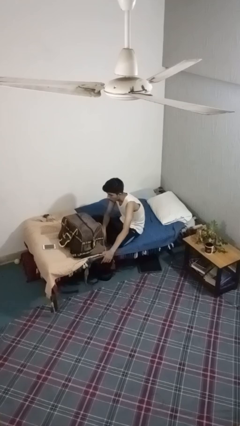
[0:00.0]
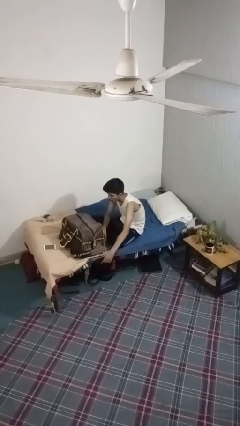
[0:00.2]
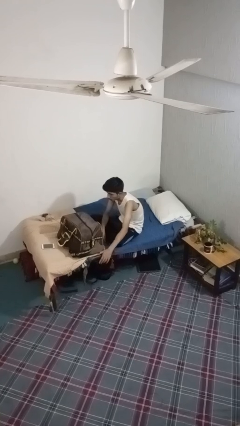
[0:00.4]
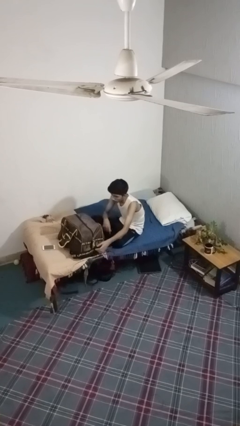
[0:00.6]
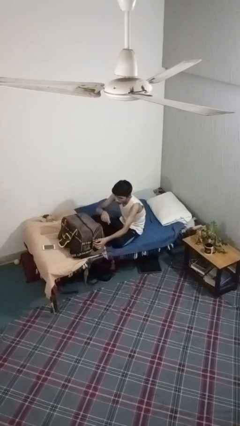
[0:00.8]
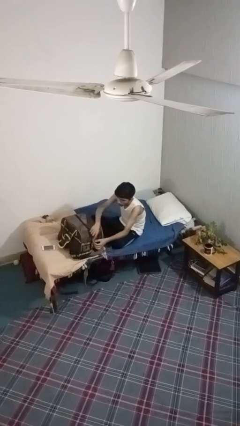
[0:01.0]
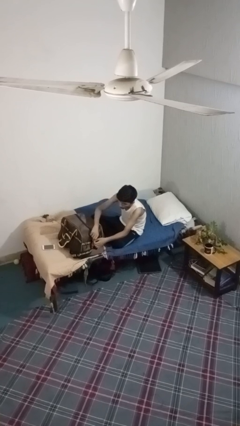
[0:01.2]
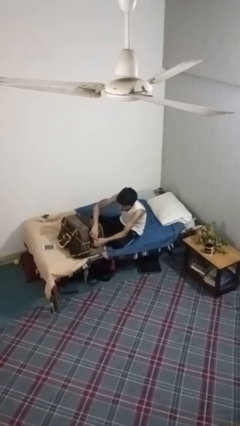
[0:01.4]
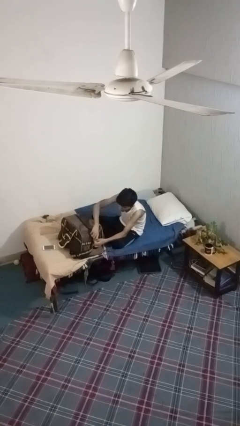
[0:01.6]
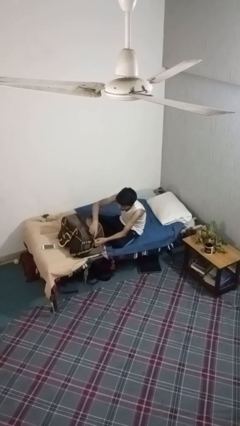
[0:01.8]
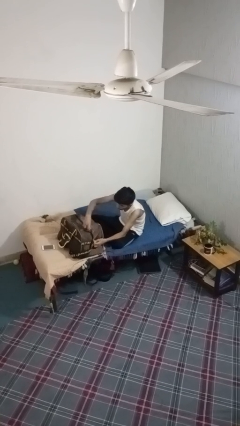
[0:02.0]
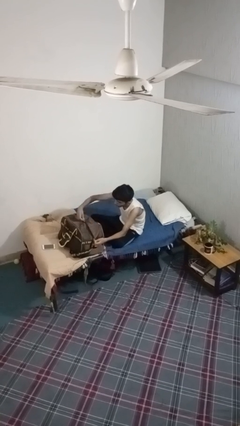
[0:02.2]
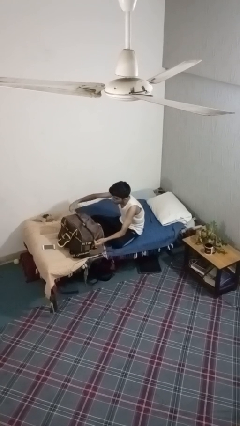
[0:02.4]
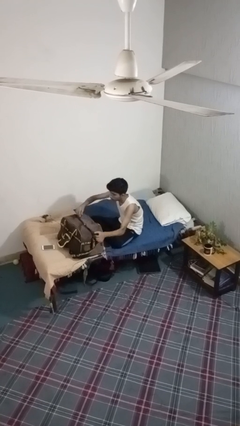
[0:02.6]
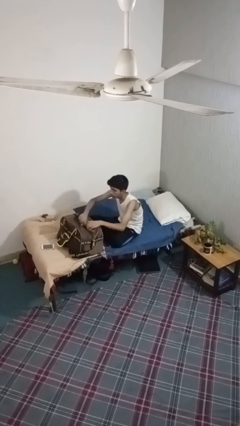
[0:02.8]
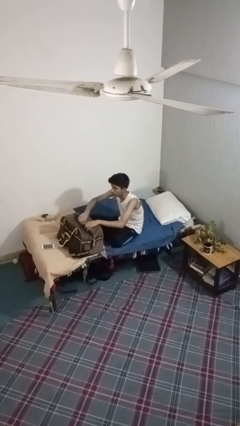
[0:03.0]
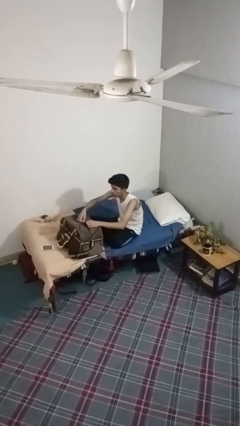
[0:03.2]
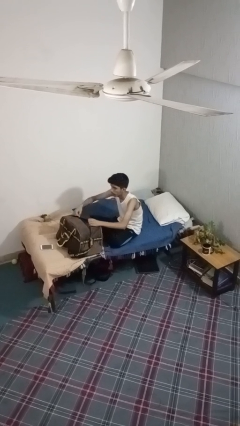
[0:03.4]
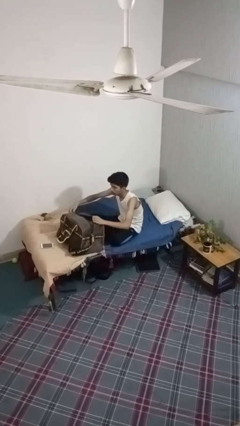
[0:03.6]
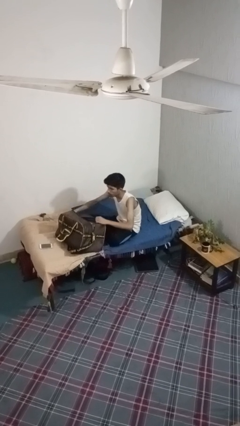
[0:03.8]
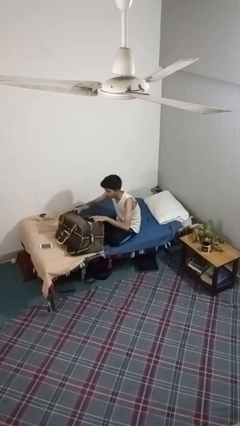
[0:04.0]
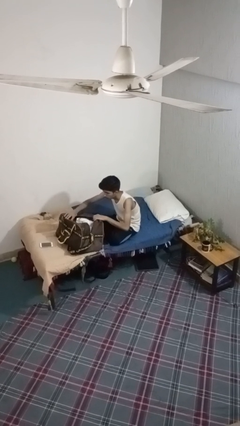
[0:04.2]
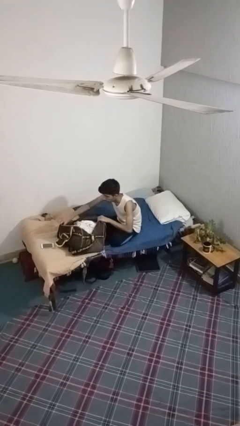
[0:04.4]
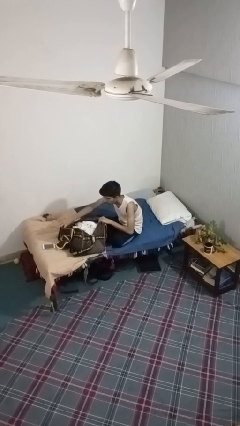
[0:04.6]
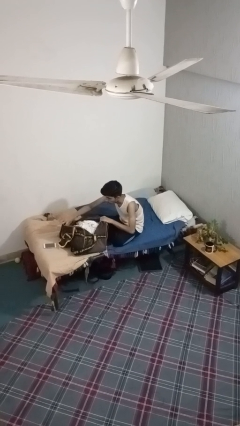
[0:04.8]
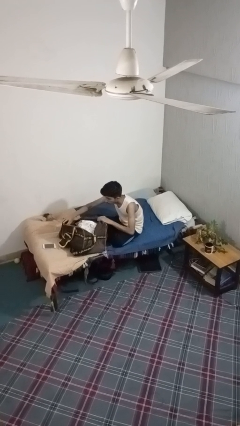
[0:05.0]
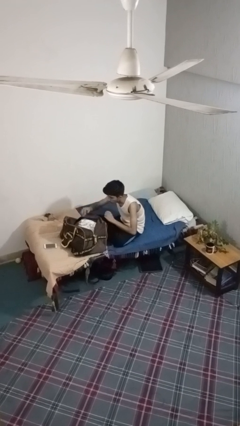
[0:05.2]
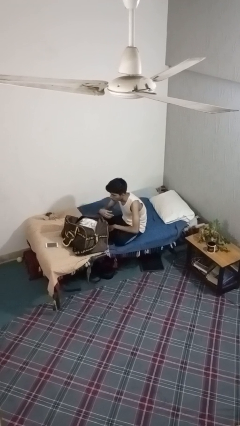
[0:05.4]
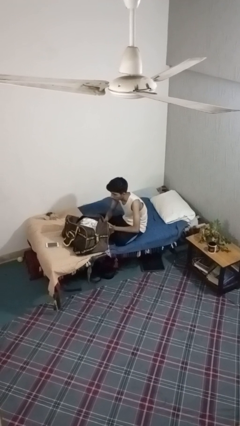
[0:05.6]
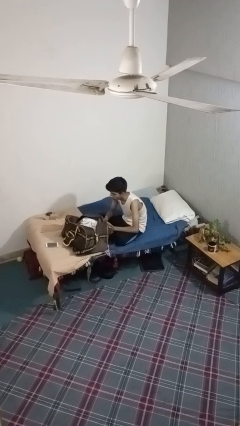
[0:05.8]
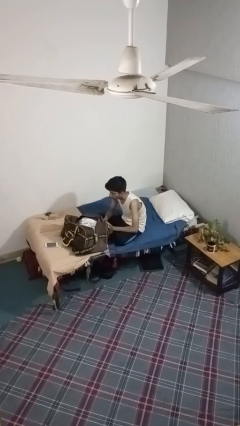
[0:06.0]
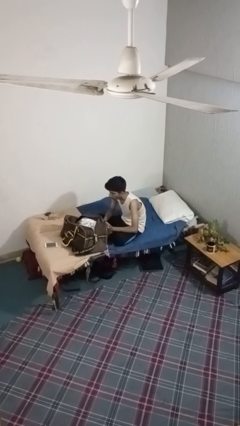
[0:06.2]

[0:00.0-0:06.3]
person opens suitcase

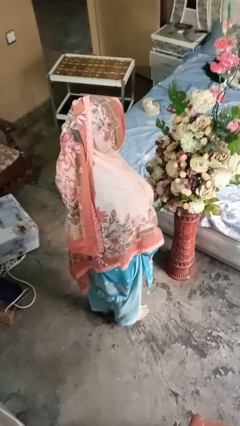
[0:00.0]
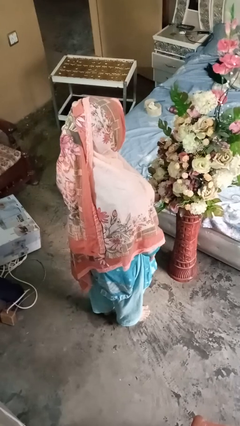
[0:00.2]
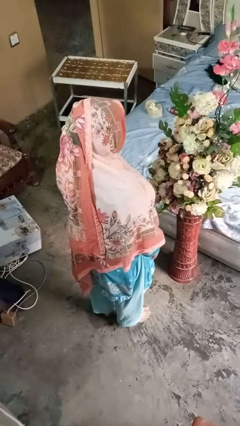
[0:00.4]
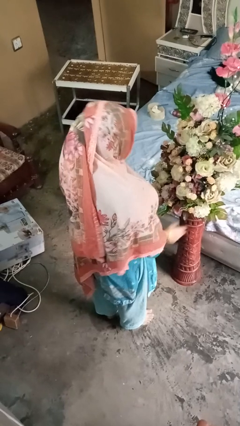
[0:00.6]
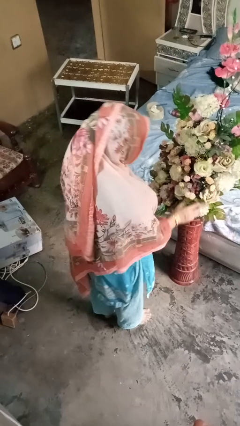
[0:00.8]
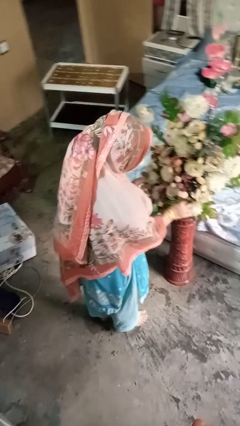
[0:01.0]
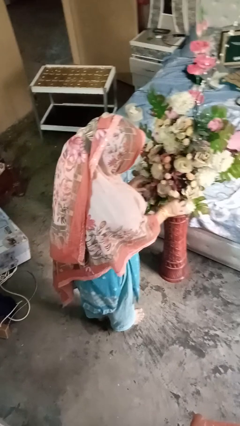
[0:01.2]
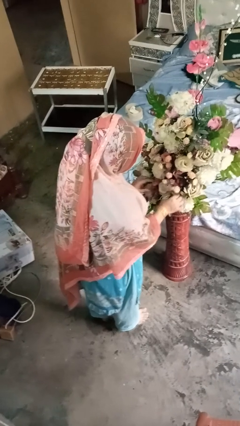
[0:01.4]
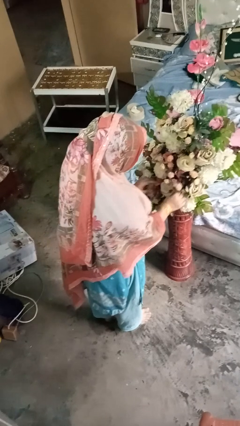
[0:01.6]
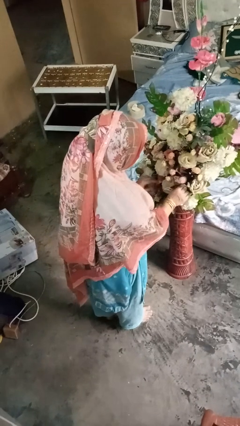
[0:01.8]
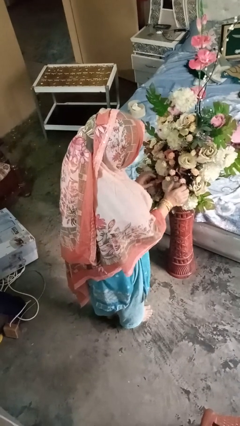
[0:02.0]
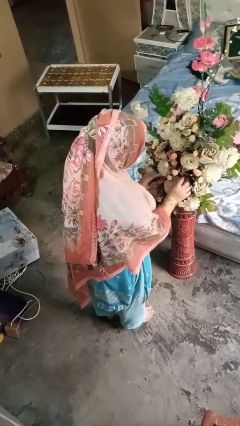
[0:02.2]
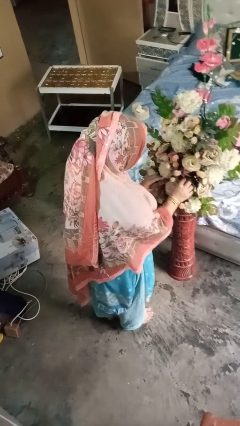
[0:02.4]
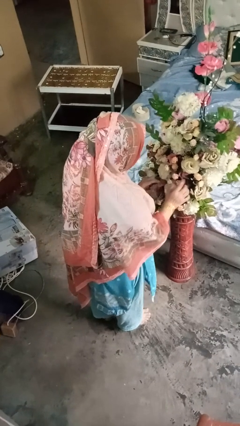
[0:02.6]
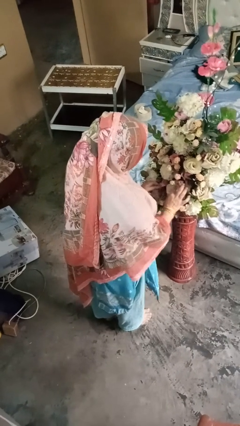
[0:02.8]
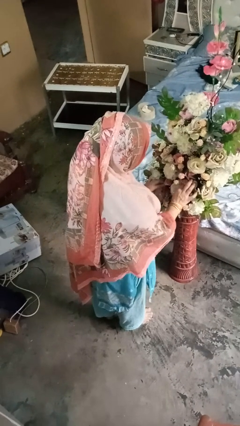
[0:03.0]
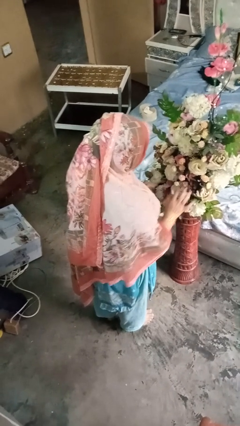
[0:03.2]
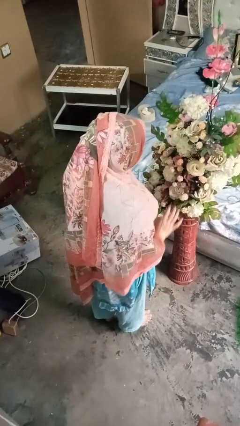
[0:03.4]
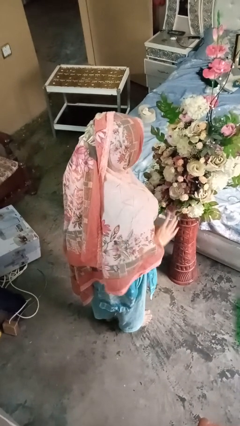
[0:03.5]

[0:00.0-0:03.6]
person arranges flowers in vase

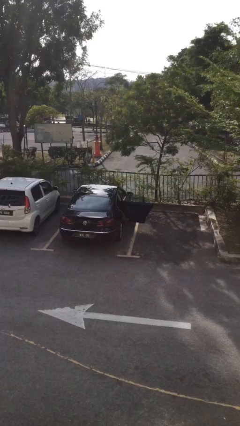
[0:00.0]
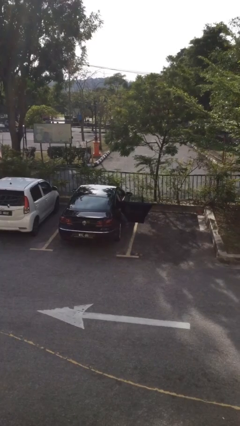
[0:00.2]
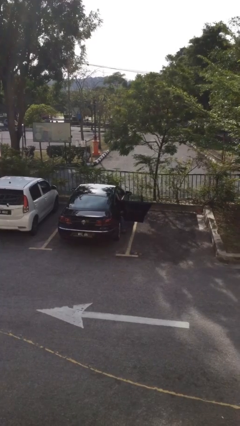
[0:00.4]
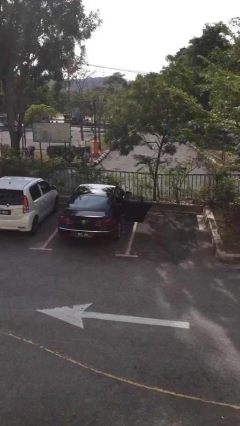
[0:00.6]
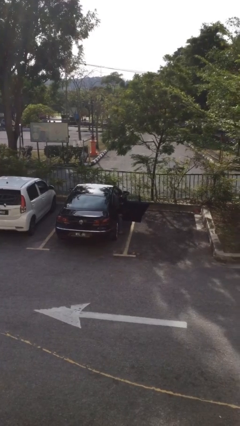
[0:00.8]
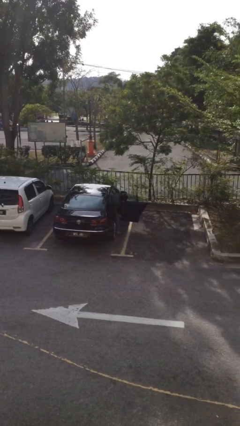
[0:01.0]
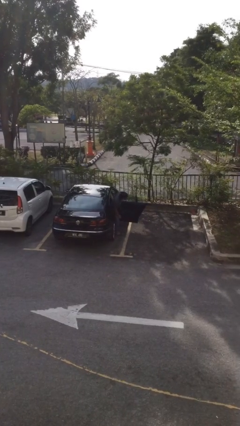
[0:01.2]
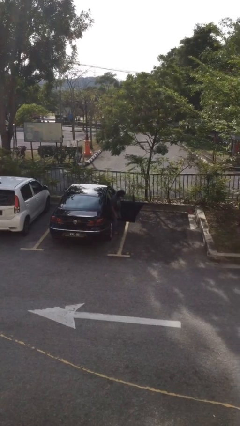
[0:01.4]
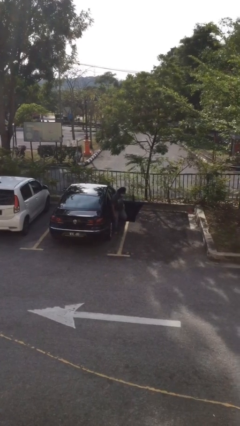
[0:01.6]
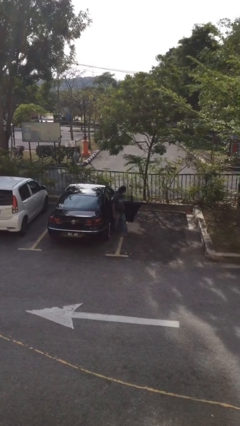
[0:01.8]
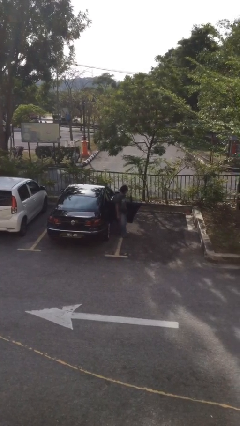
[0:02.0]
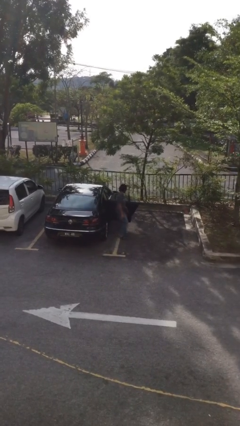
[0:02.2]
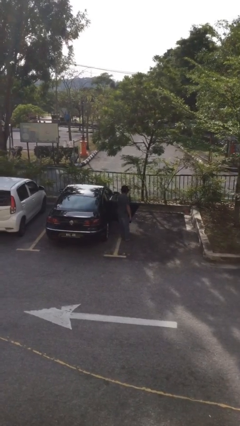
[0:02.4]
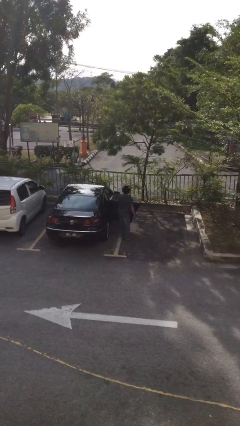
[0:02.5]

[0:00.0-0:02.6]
person exits car

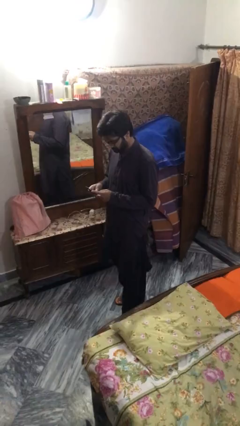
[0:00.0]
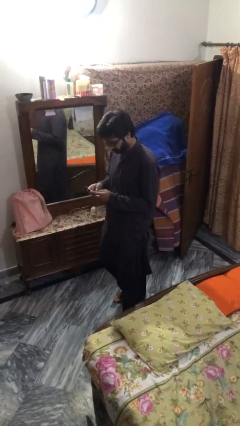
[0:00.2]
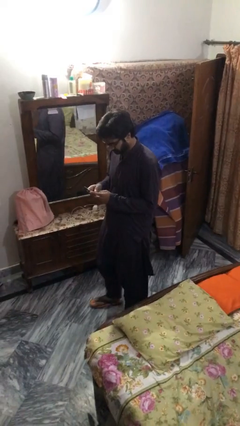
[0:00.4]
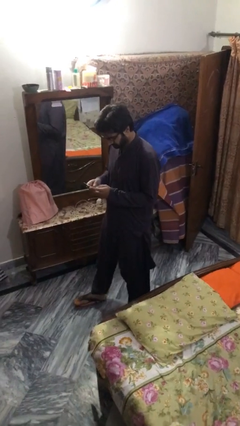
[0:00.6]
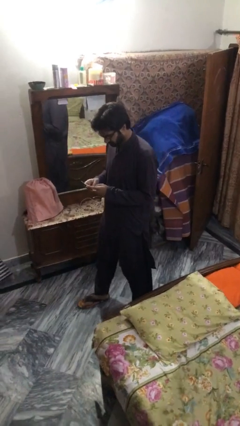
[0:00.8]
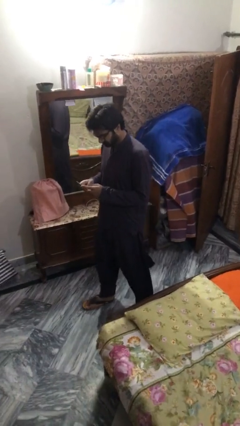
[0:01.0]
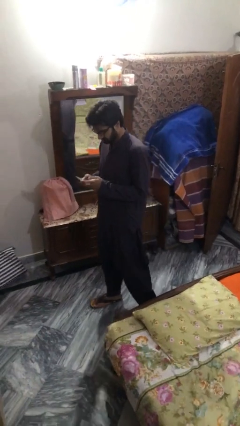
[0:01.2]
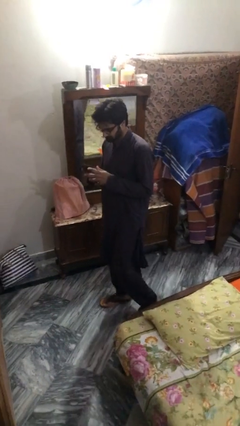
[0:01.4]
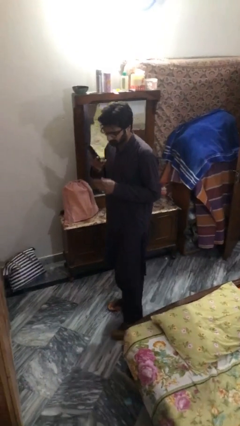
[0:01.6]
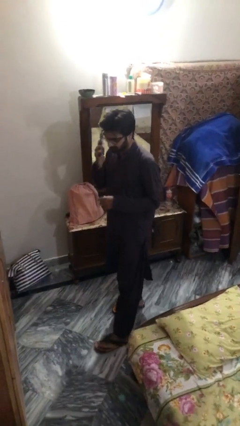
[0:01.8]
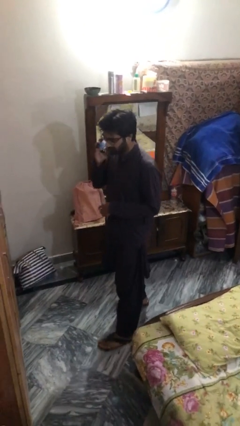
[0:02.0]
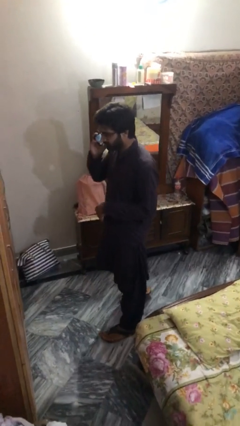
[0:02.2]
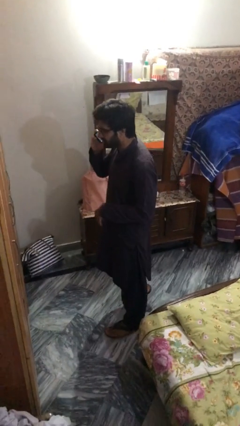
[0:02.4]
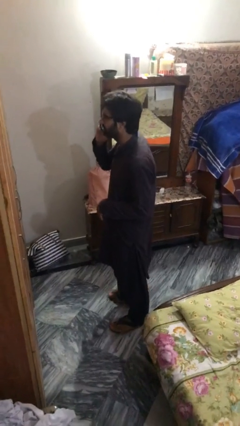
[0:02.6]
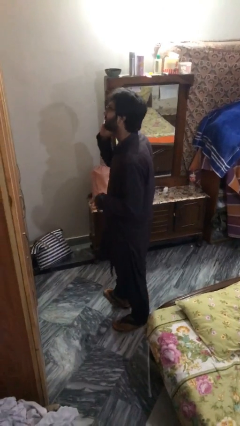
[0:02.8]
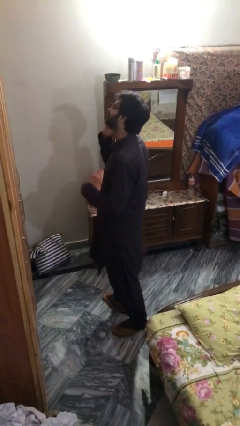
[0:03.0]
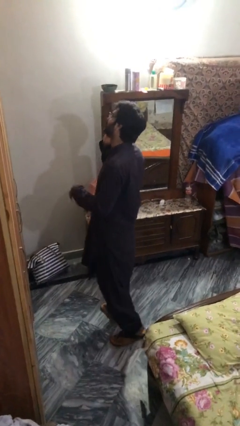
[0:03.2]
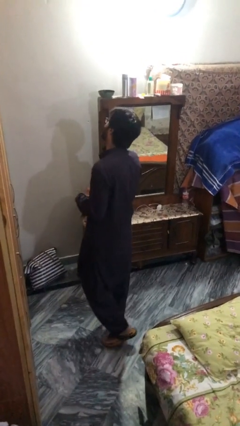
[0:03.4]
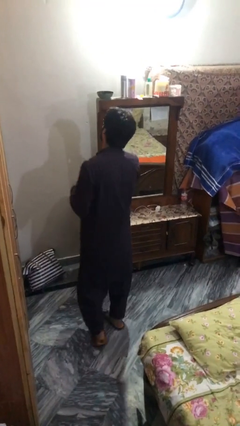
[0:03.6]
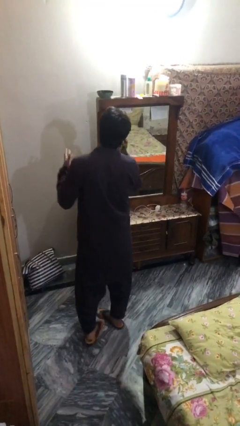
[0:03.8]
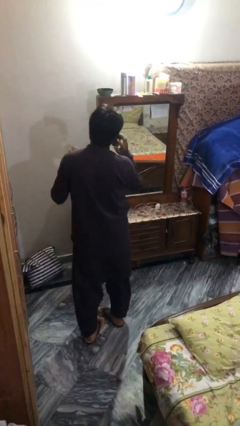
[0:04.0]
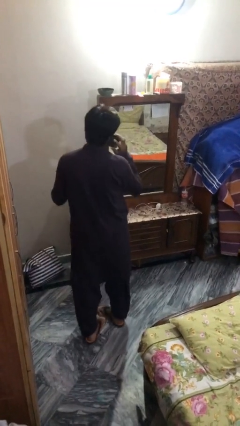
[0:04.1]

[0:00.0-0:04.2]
person talks on phone

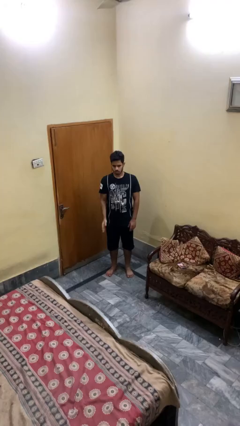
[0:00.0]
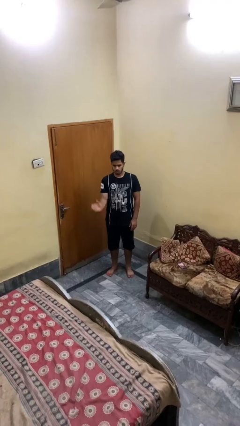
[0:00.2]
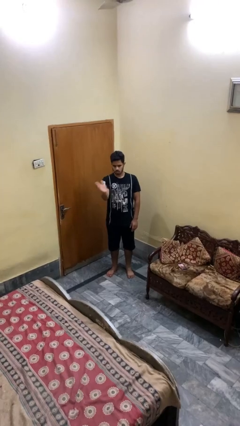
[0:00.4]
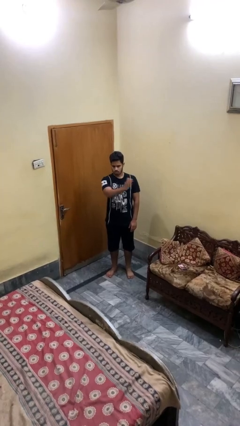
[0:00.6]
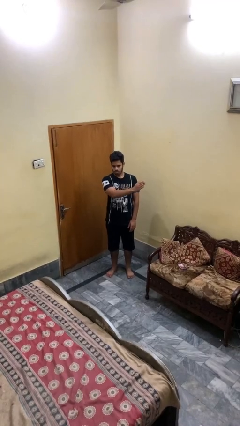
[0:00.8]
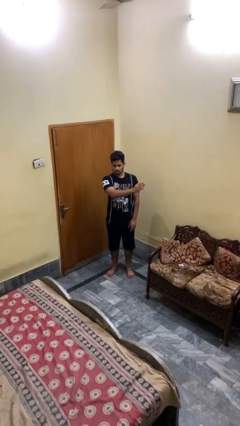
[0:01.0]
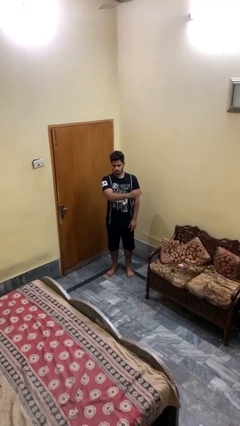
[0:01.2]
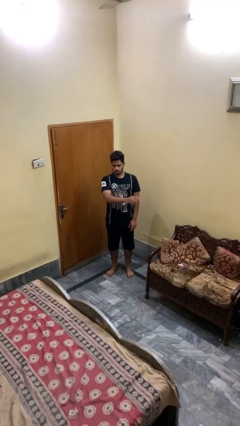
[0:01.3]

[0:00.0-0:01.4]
person gestures swipe left
